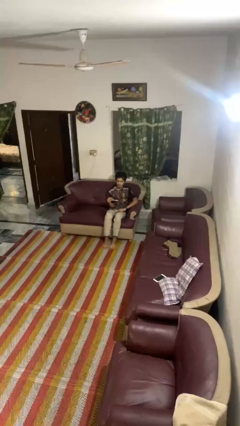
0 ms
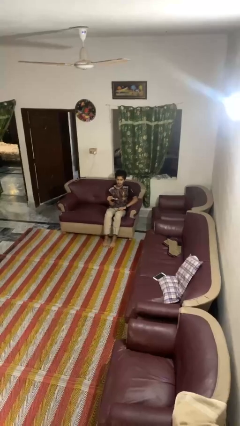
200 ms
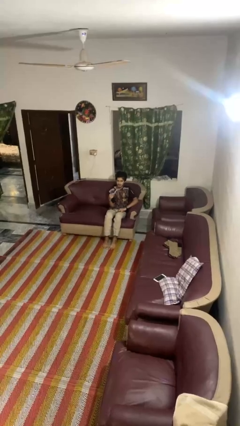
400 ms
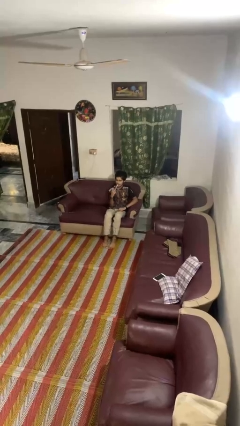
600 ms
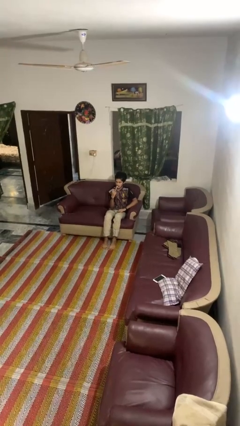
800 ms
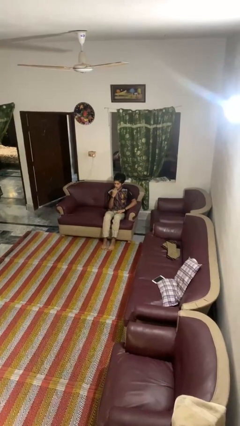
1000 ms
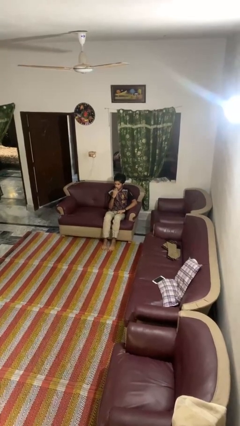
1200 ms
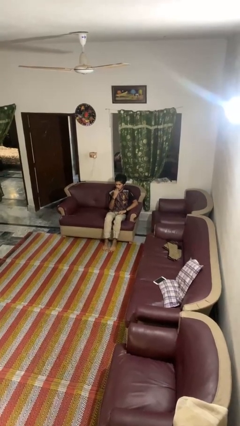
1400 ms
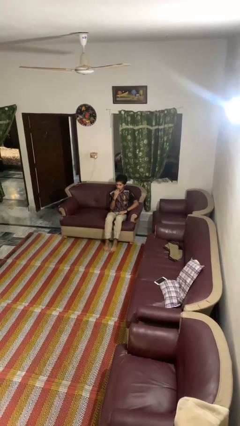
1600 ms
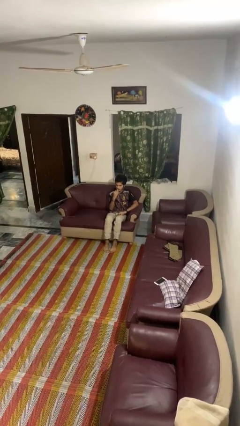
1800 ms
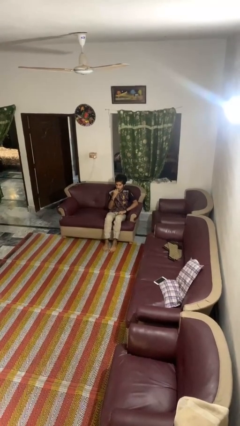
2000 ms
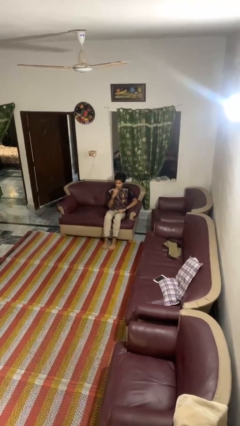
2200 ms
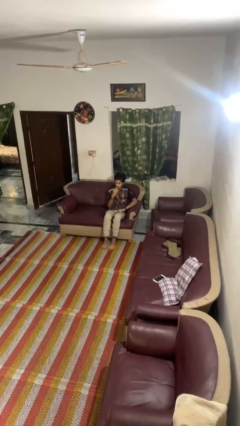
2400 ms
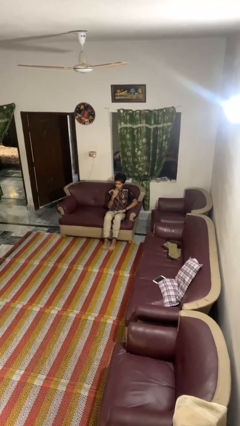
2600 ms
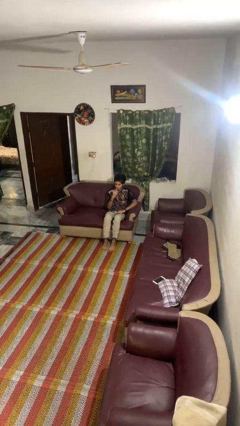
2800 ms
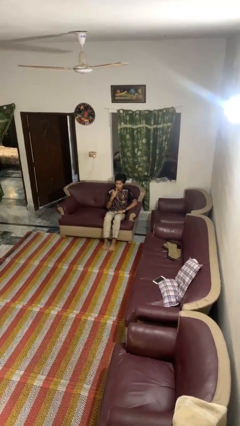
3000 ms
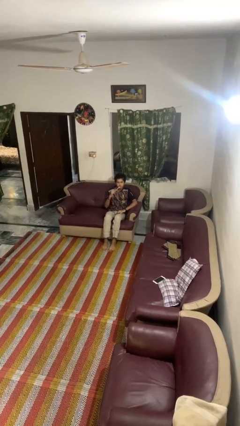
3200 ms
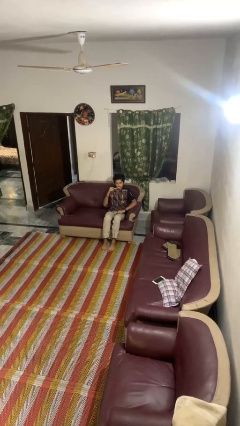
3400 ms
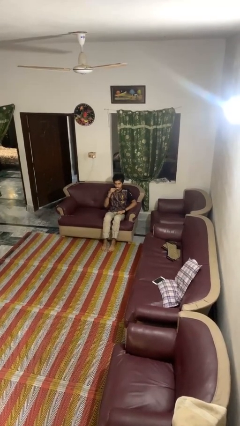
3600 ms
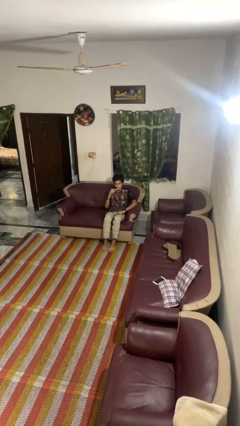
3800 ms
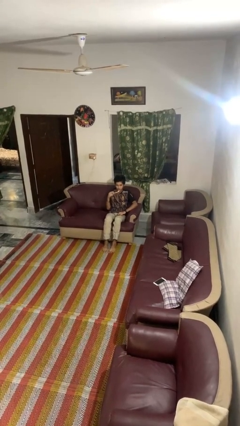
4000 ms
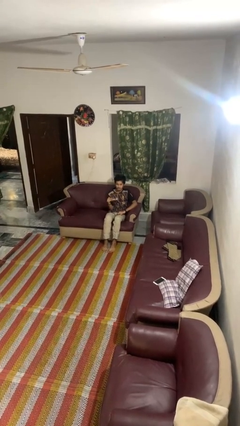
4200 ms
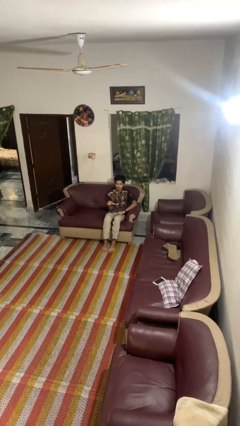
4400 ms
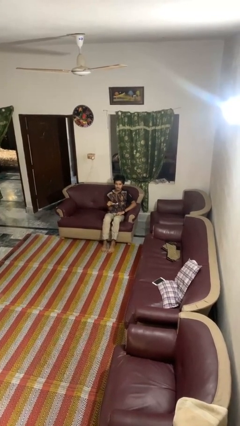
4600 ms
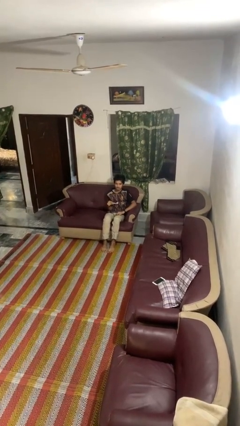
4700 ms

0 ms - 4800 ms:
person brushes teeth

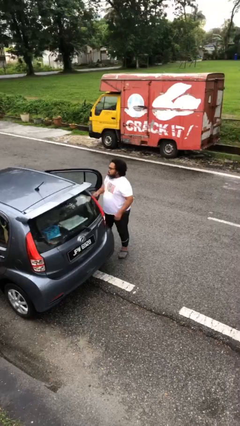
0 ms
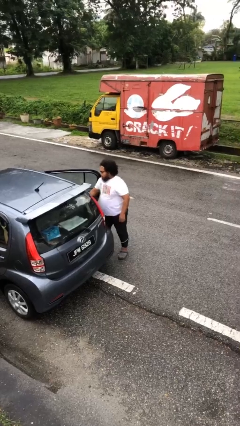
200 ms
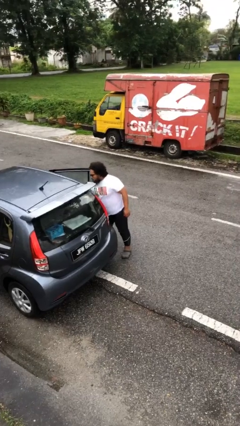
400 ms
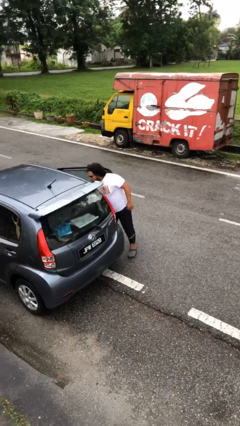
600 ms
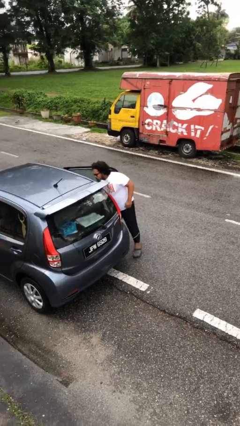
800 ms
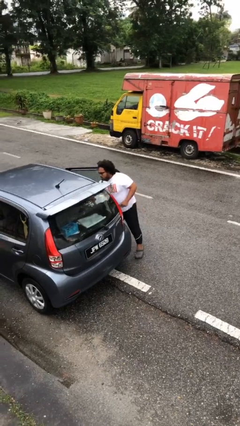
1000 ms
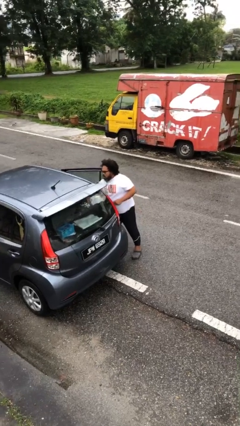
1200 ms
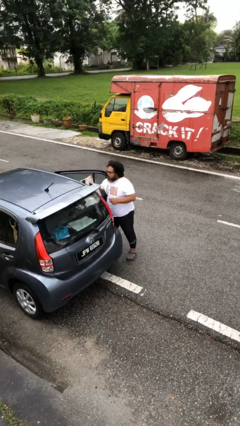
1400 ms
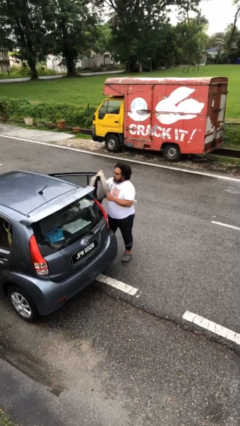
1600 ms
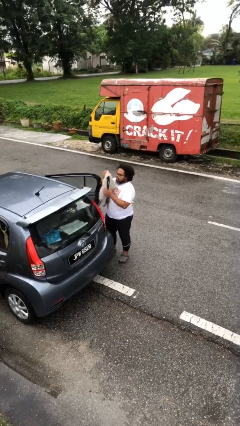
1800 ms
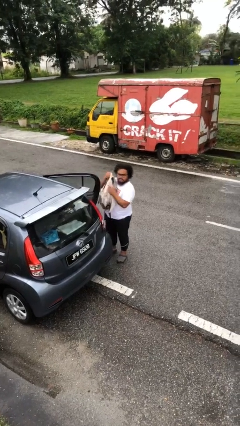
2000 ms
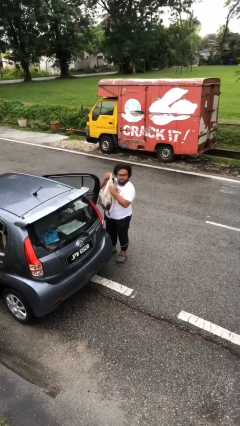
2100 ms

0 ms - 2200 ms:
person unloads car

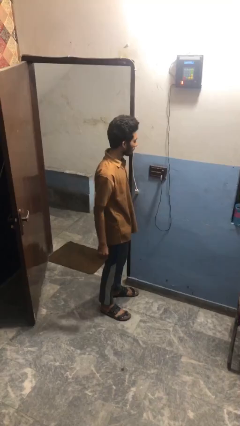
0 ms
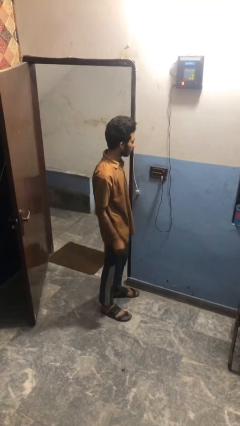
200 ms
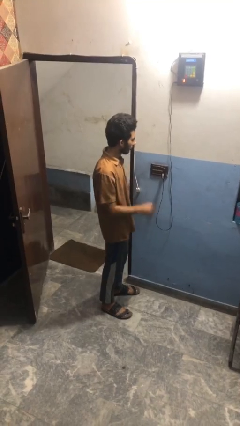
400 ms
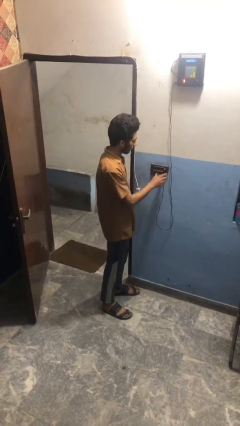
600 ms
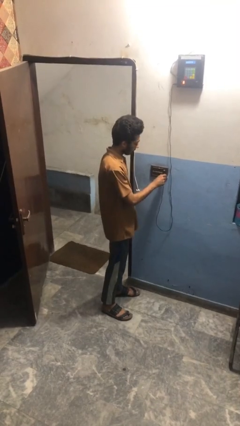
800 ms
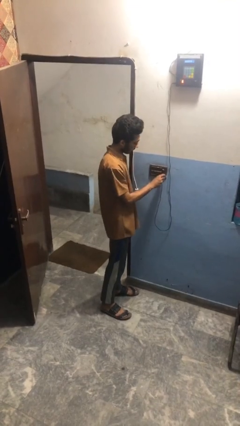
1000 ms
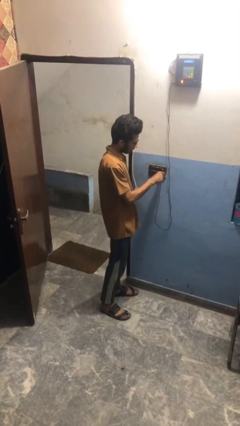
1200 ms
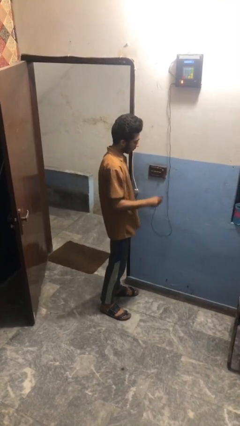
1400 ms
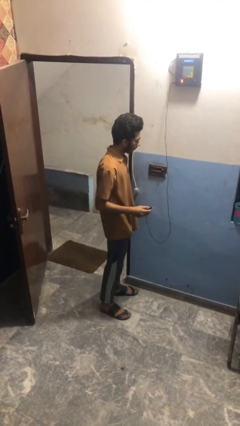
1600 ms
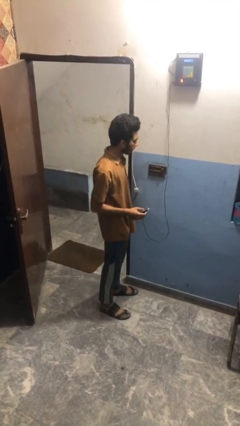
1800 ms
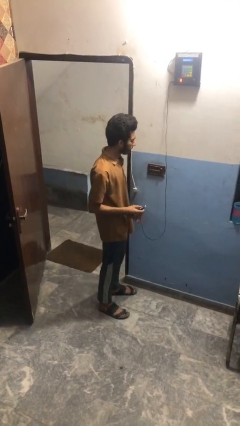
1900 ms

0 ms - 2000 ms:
person unplugs from electrical socket

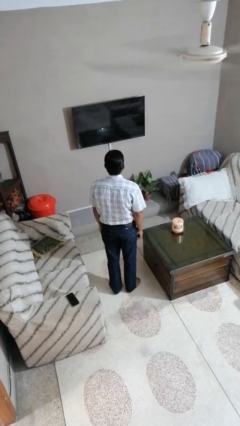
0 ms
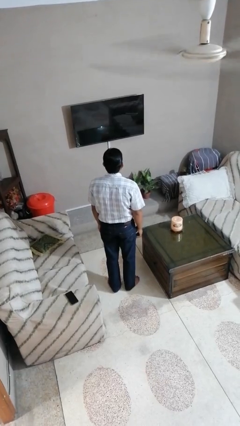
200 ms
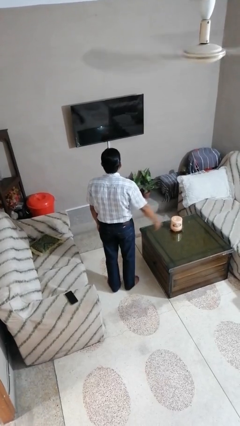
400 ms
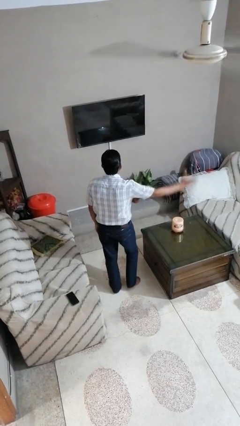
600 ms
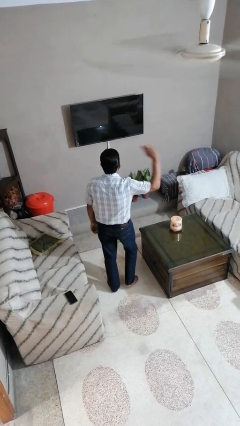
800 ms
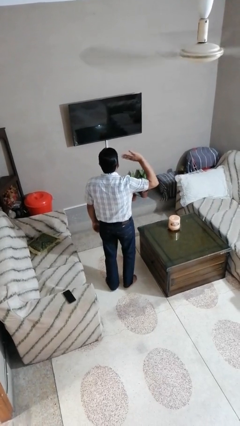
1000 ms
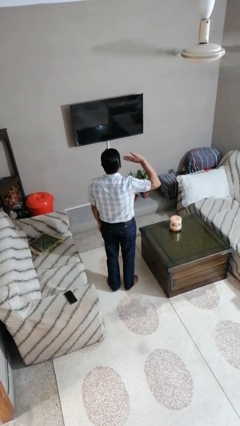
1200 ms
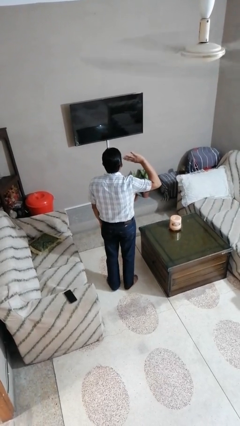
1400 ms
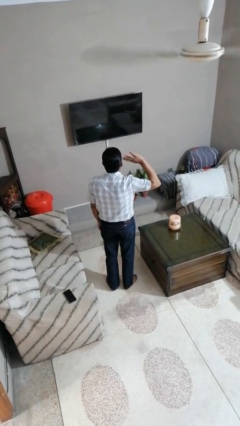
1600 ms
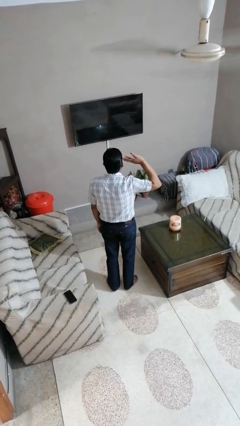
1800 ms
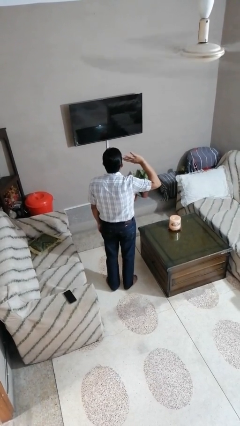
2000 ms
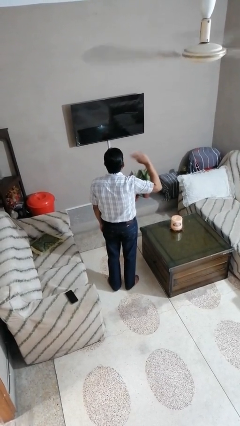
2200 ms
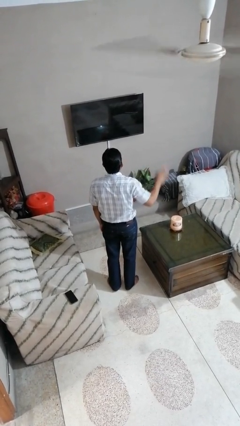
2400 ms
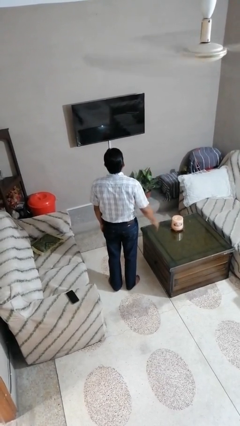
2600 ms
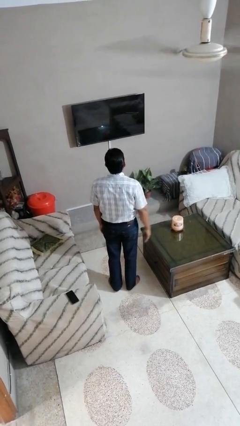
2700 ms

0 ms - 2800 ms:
person salutes

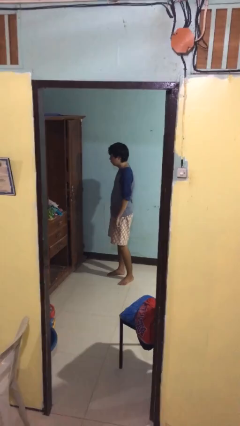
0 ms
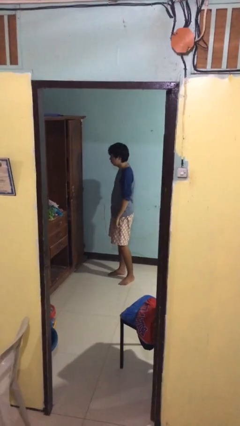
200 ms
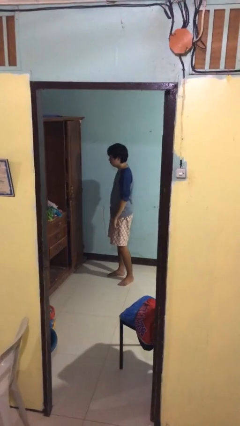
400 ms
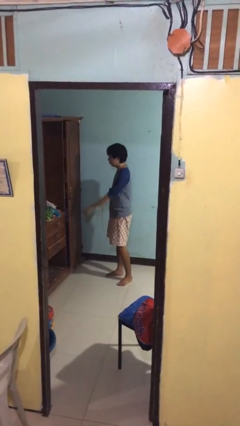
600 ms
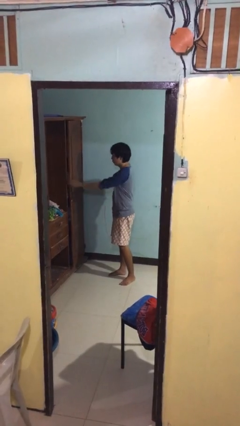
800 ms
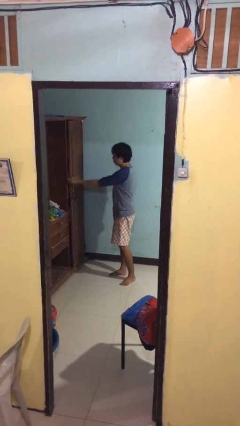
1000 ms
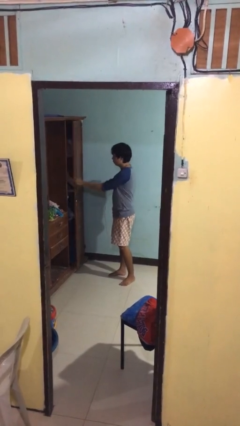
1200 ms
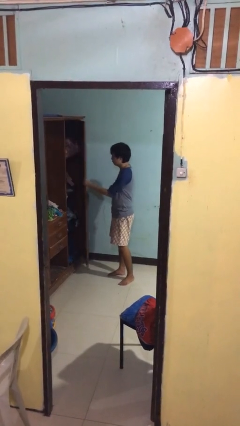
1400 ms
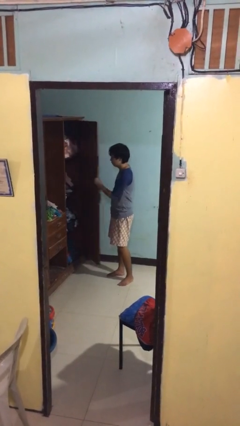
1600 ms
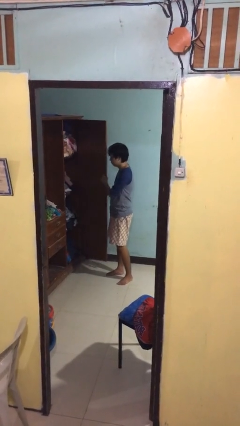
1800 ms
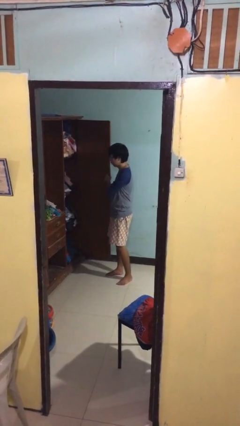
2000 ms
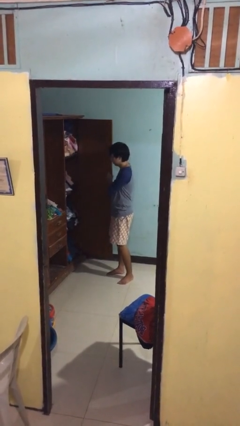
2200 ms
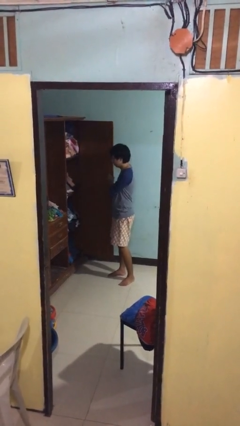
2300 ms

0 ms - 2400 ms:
person opens closet door

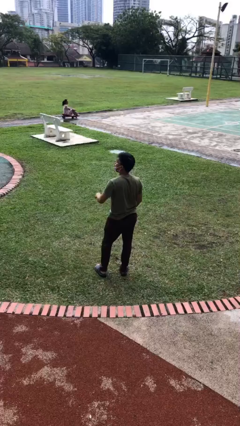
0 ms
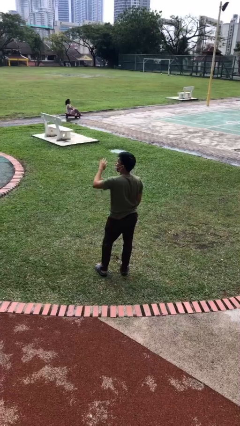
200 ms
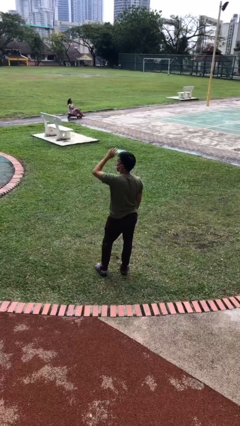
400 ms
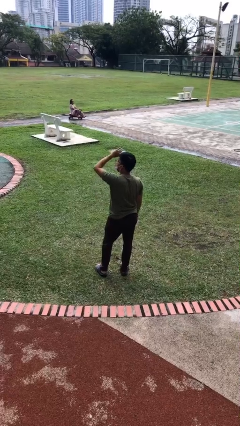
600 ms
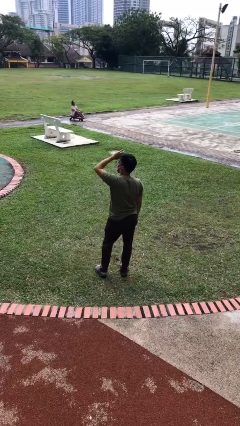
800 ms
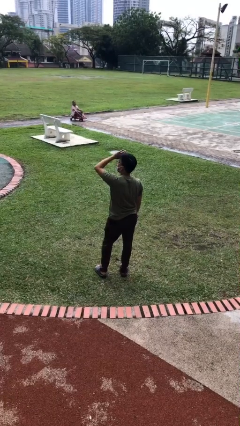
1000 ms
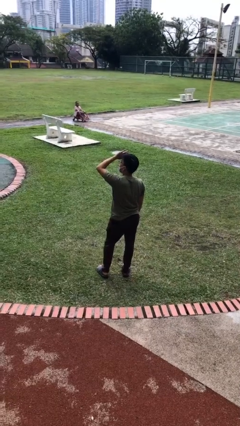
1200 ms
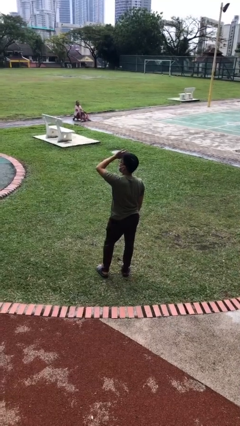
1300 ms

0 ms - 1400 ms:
person shades eyes

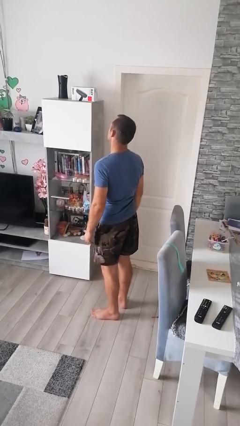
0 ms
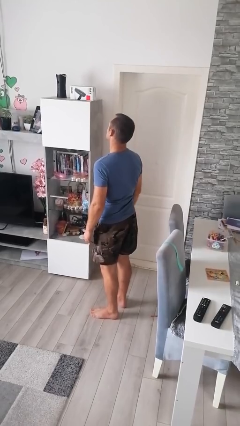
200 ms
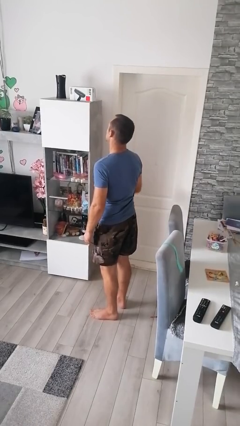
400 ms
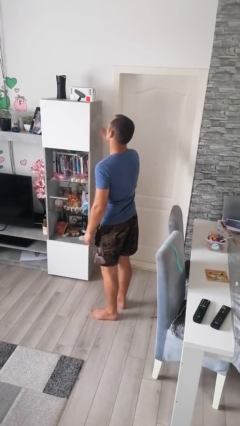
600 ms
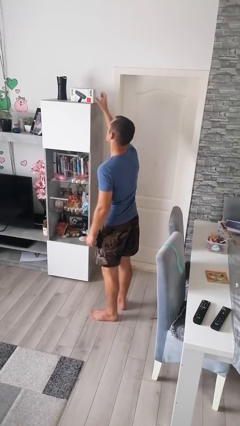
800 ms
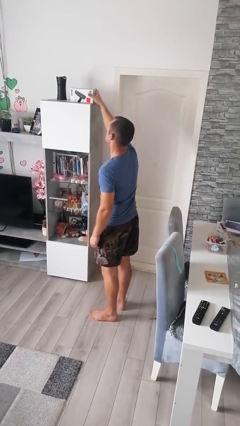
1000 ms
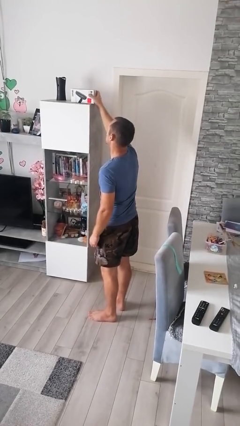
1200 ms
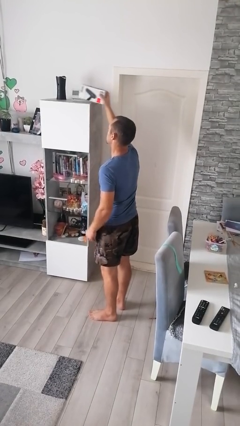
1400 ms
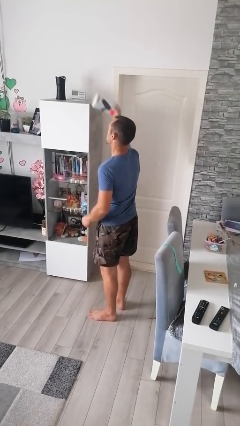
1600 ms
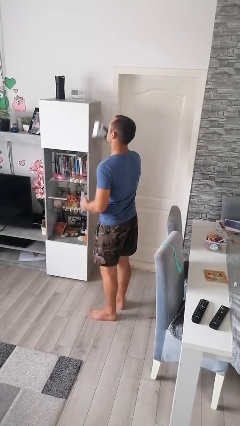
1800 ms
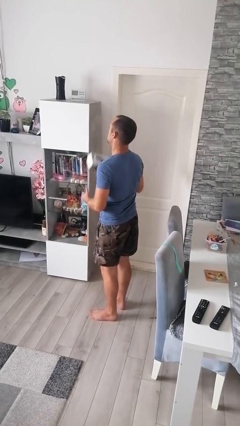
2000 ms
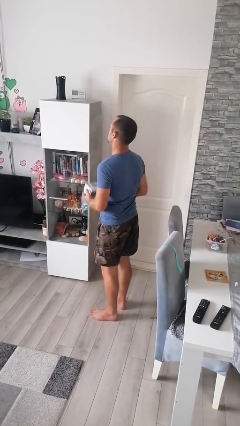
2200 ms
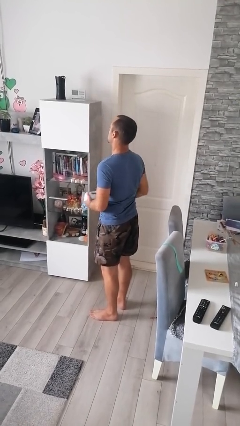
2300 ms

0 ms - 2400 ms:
person puts down object on shelf
